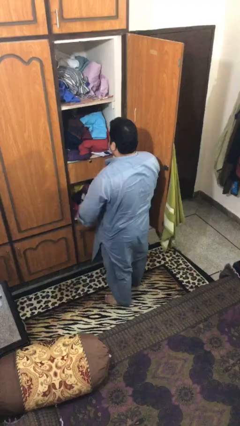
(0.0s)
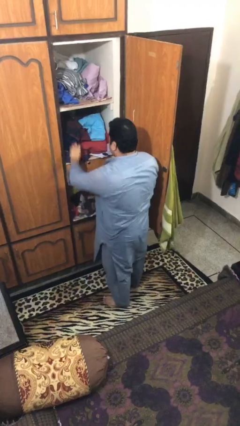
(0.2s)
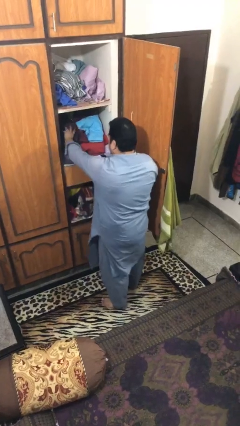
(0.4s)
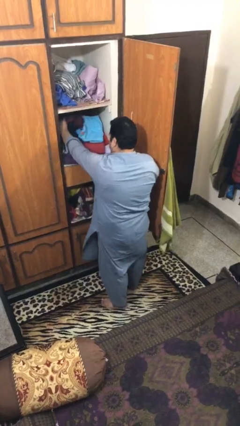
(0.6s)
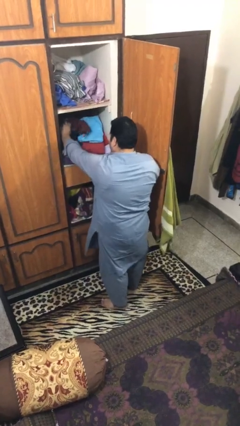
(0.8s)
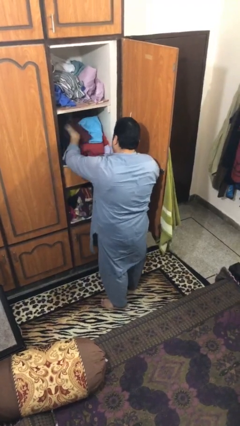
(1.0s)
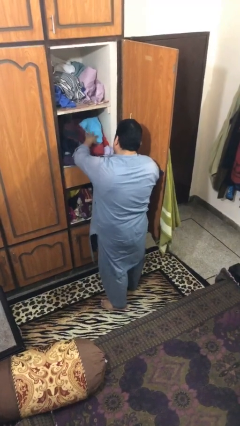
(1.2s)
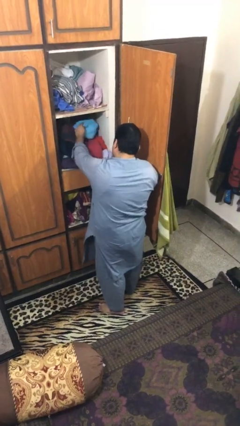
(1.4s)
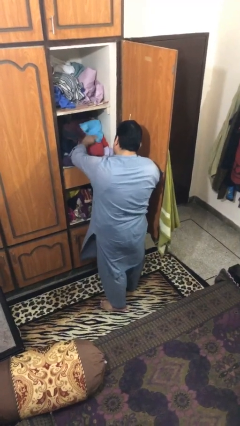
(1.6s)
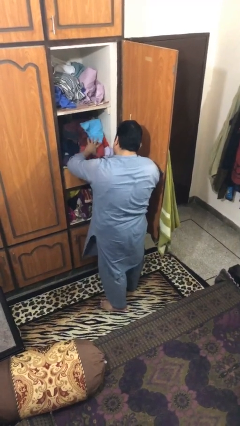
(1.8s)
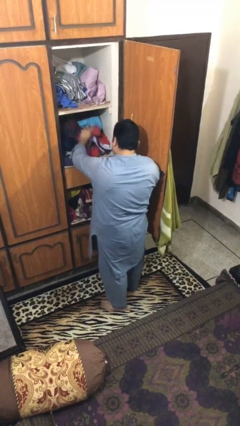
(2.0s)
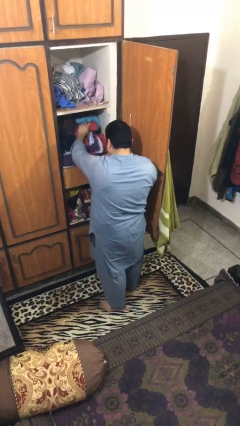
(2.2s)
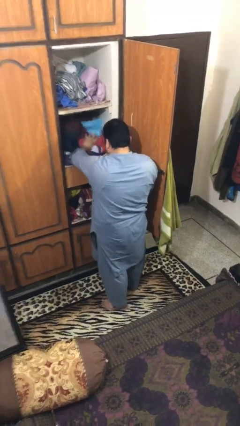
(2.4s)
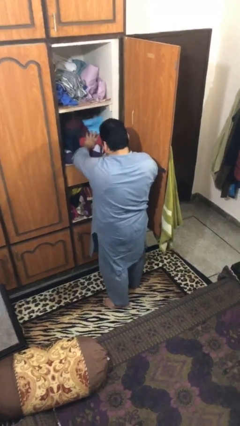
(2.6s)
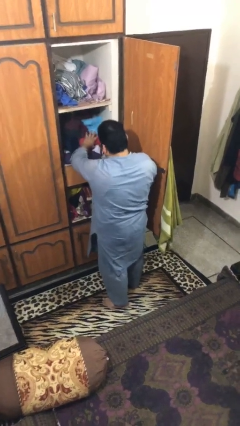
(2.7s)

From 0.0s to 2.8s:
person searches in cabinet

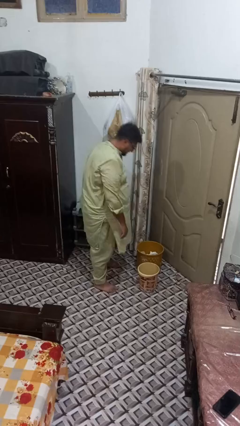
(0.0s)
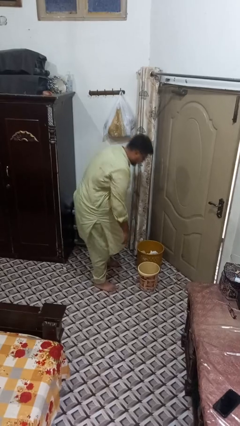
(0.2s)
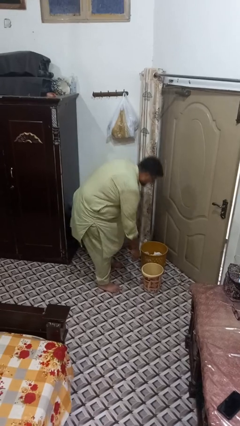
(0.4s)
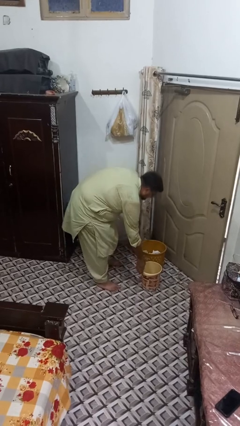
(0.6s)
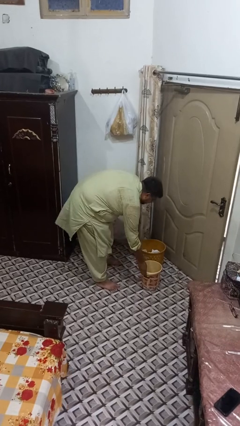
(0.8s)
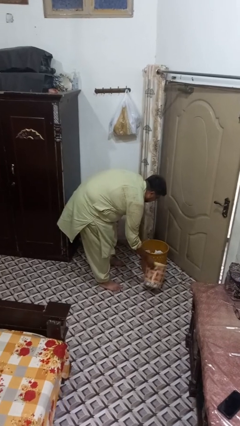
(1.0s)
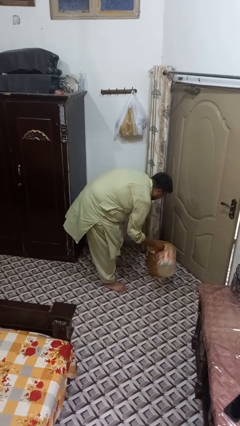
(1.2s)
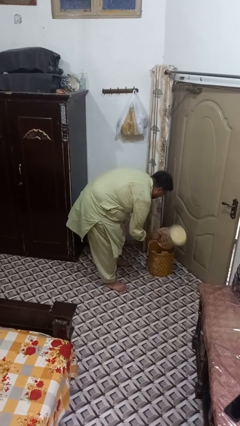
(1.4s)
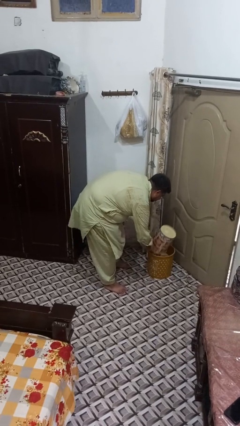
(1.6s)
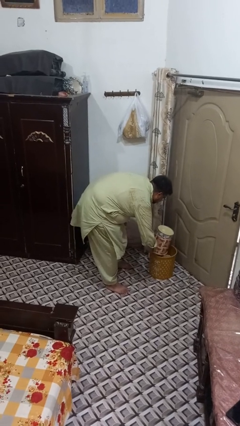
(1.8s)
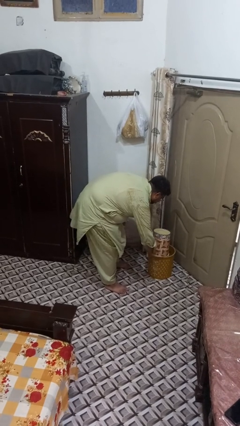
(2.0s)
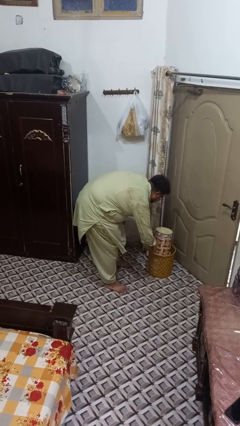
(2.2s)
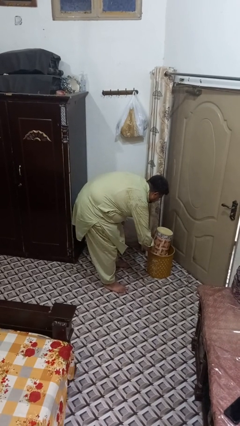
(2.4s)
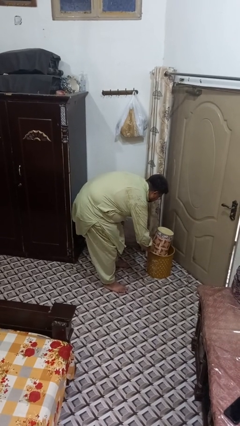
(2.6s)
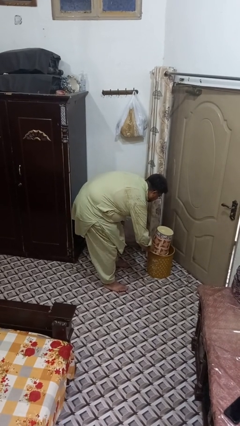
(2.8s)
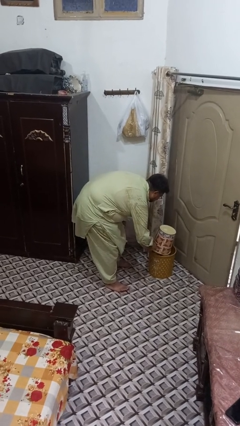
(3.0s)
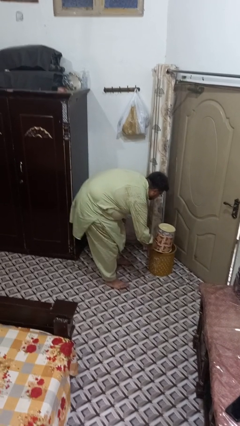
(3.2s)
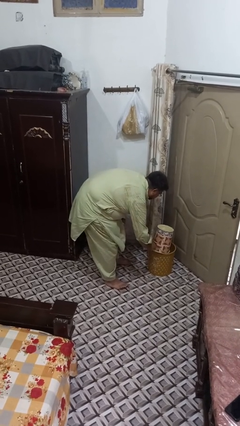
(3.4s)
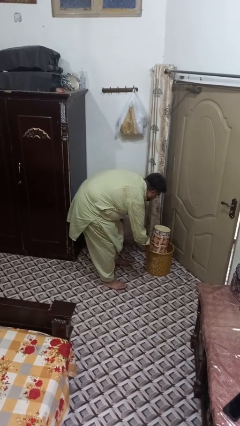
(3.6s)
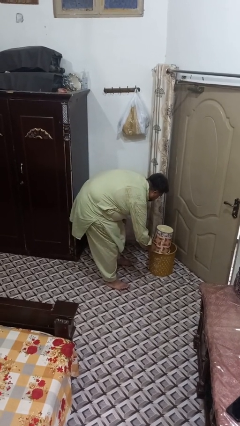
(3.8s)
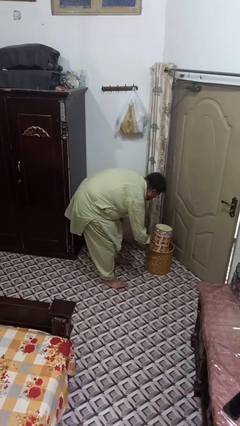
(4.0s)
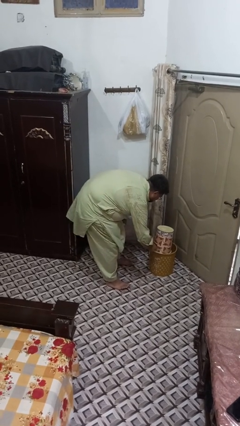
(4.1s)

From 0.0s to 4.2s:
person removes trashbag from trashcan

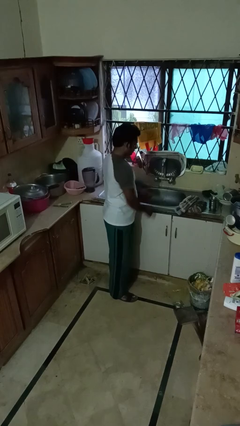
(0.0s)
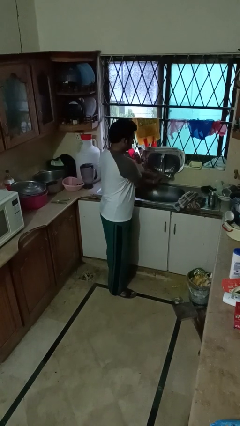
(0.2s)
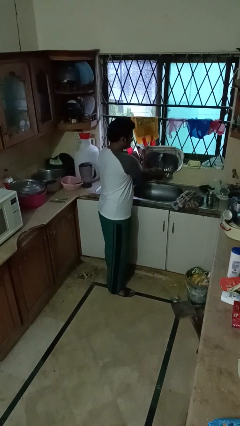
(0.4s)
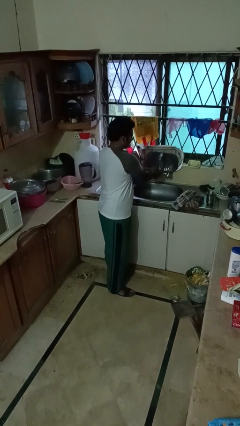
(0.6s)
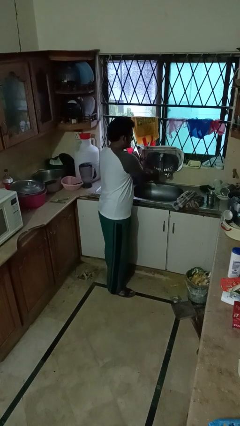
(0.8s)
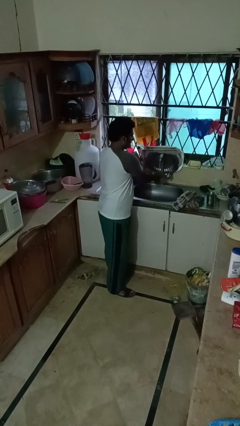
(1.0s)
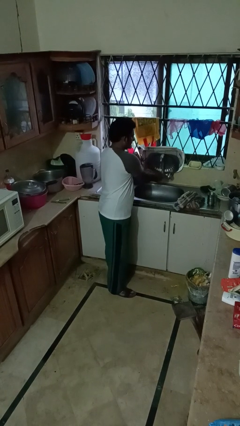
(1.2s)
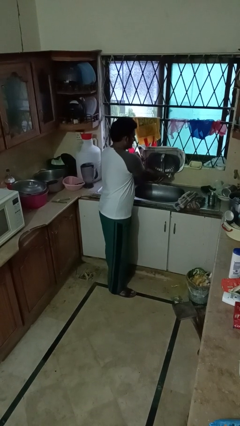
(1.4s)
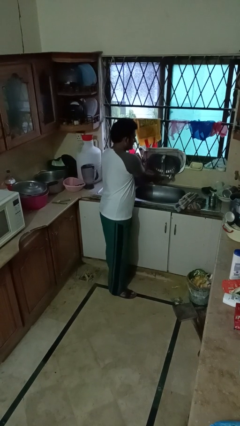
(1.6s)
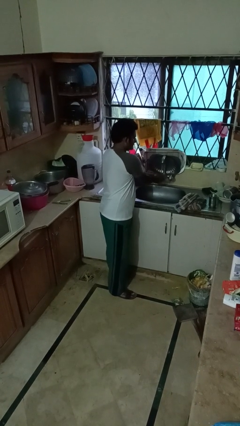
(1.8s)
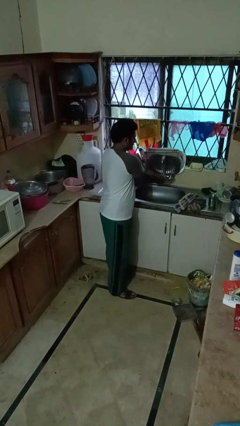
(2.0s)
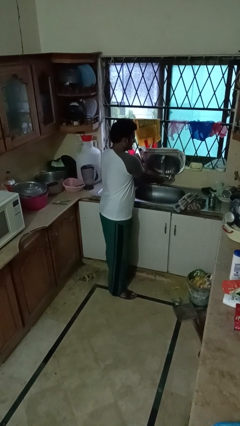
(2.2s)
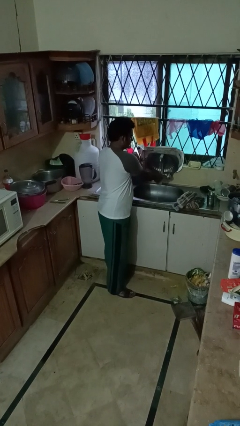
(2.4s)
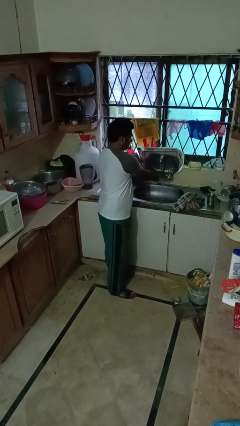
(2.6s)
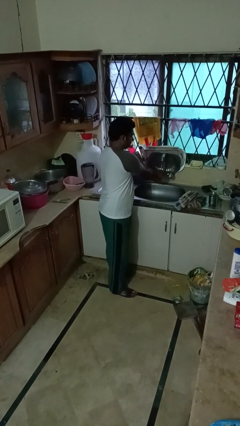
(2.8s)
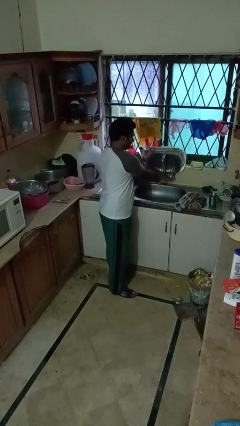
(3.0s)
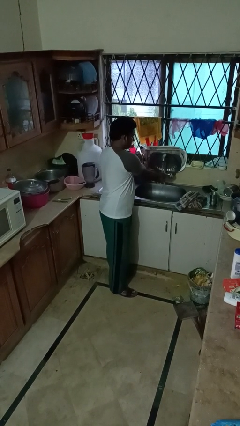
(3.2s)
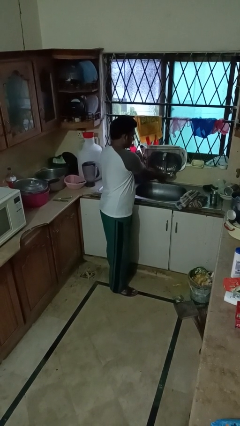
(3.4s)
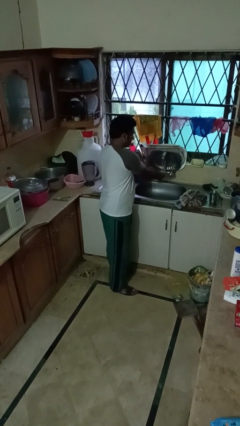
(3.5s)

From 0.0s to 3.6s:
person washes hands

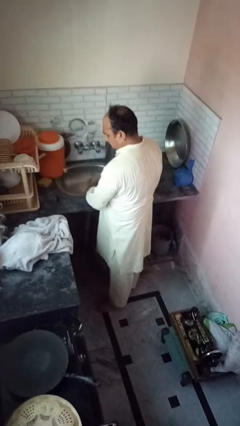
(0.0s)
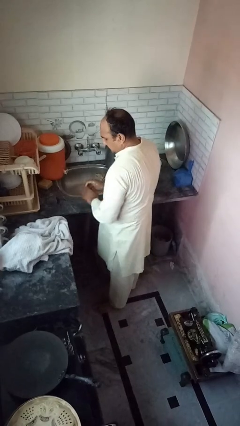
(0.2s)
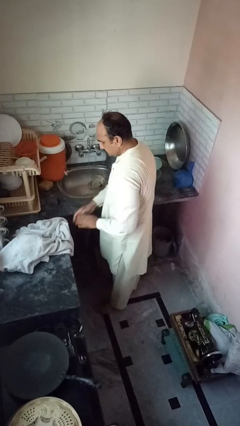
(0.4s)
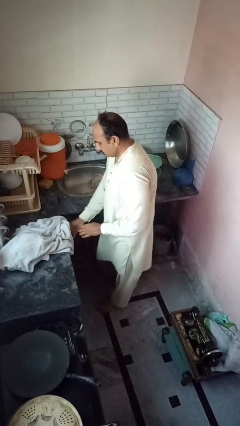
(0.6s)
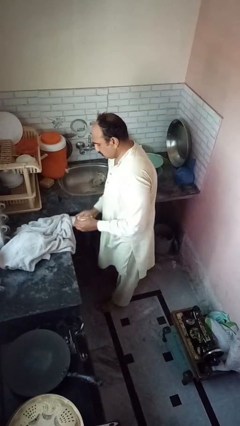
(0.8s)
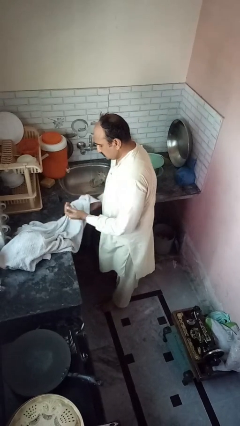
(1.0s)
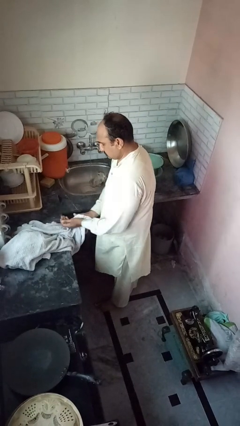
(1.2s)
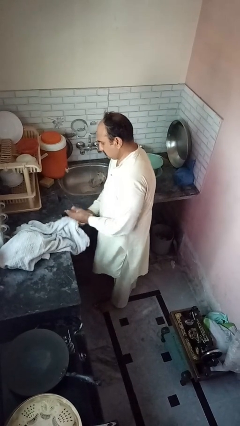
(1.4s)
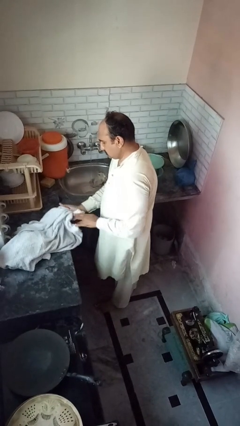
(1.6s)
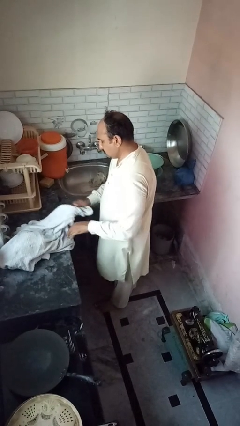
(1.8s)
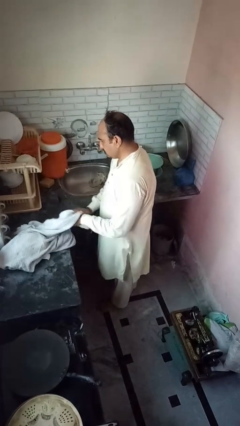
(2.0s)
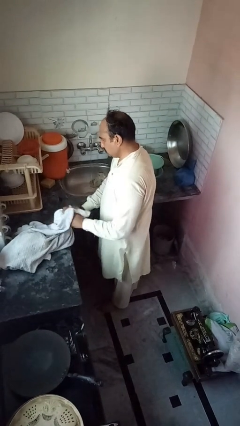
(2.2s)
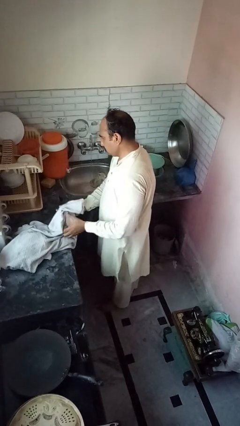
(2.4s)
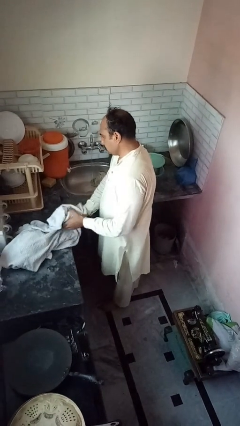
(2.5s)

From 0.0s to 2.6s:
person dries hands with towel

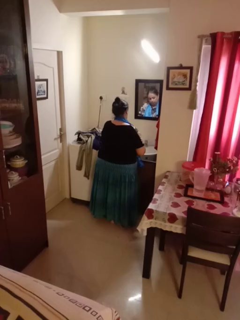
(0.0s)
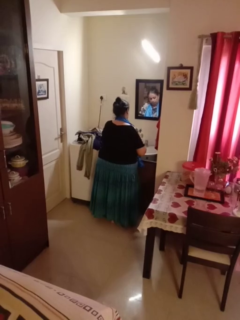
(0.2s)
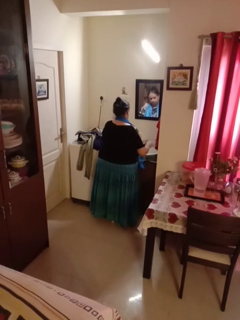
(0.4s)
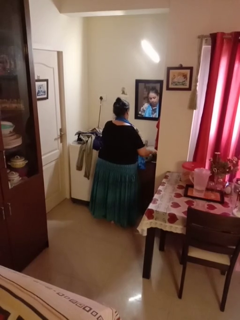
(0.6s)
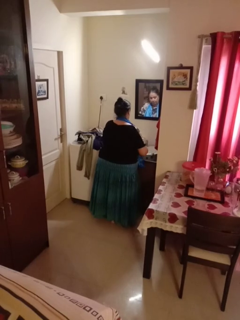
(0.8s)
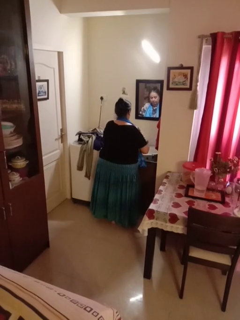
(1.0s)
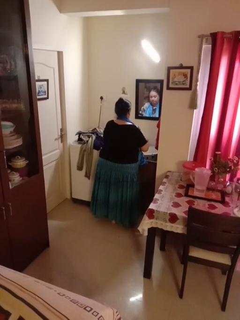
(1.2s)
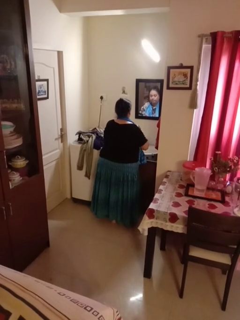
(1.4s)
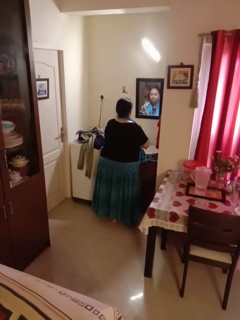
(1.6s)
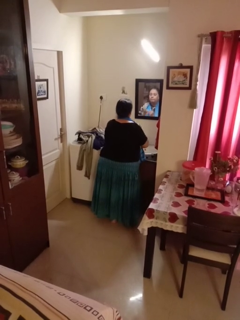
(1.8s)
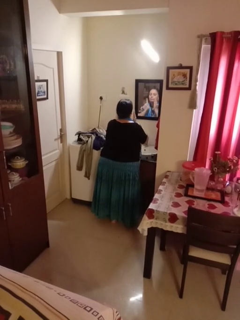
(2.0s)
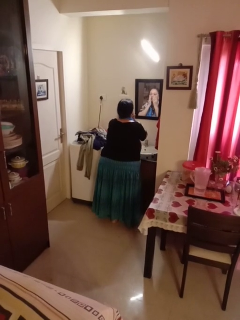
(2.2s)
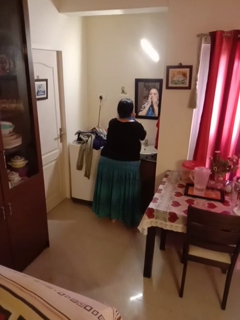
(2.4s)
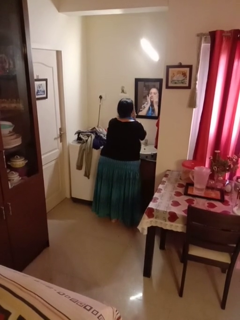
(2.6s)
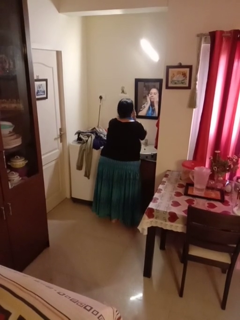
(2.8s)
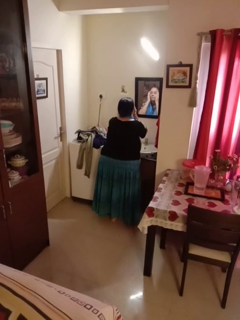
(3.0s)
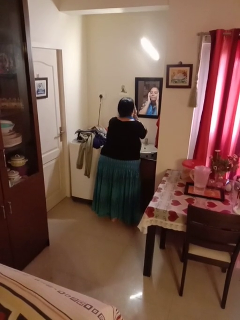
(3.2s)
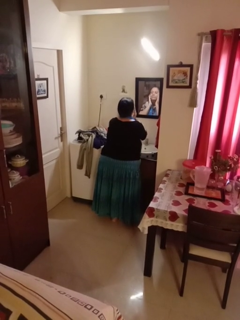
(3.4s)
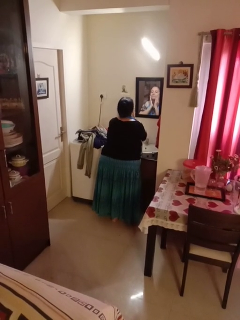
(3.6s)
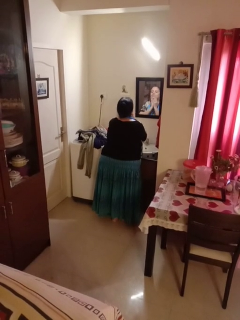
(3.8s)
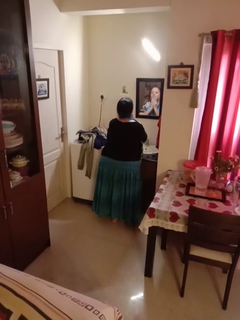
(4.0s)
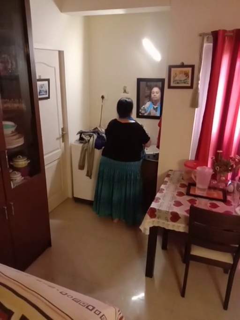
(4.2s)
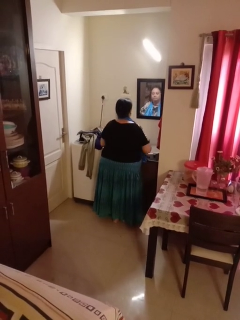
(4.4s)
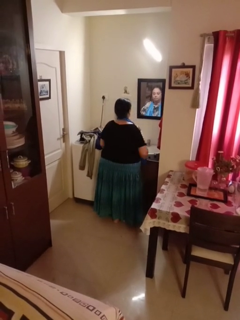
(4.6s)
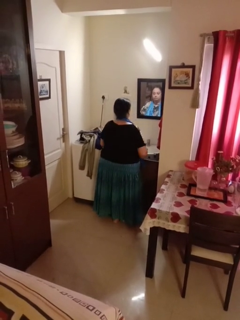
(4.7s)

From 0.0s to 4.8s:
person applies foundation makeup

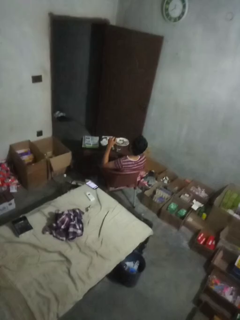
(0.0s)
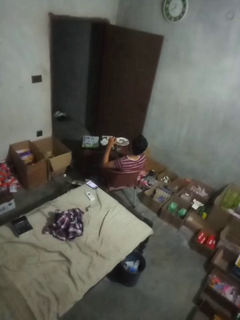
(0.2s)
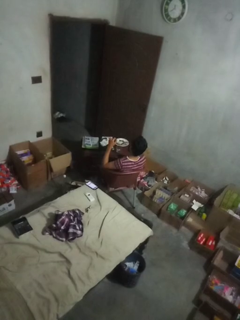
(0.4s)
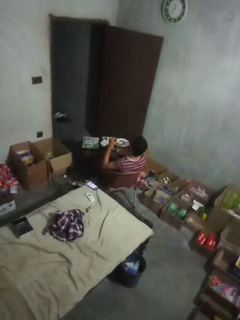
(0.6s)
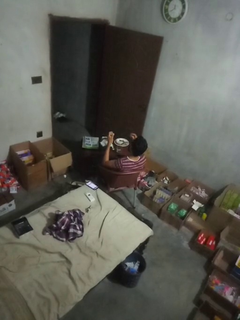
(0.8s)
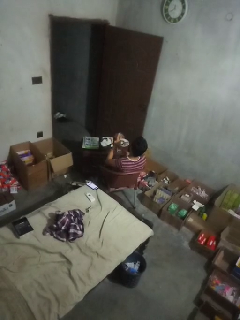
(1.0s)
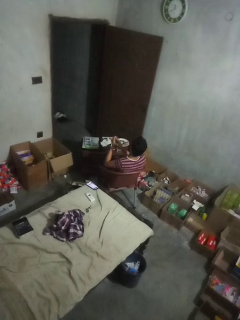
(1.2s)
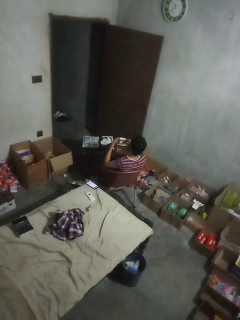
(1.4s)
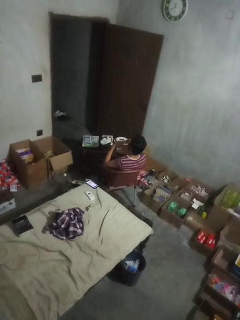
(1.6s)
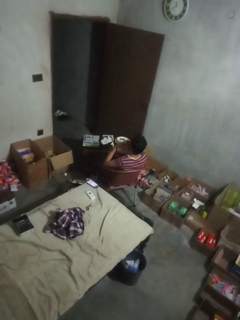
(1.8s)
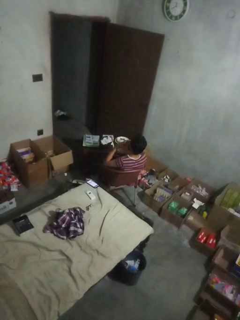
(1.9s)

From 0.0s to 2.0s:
person claps hands
